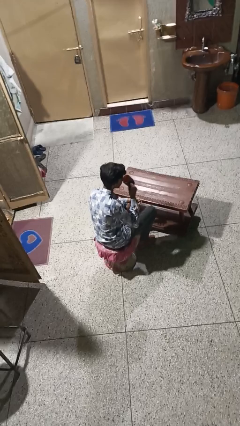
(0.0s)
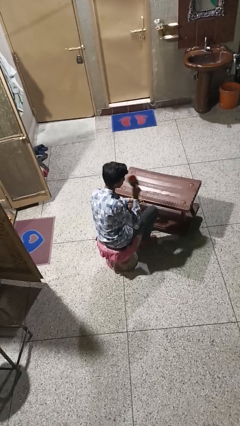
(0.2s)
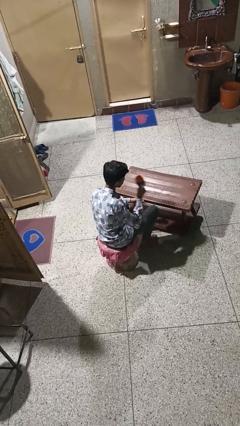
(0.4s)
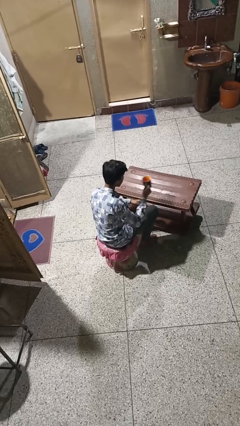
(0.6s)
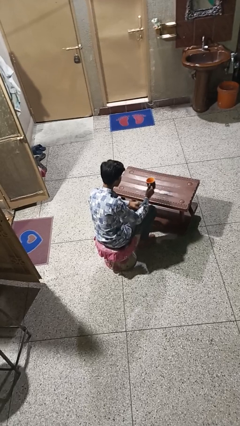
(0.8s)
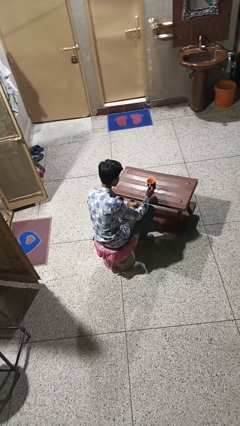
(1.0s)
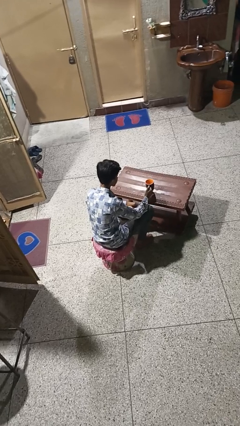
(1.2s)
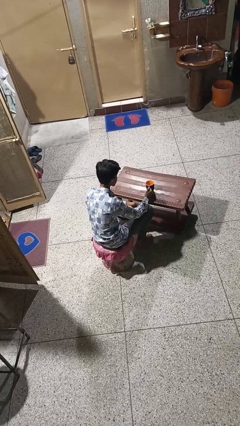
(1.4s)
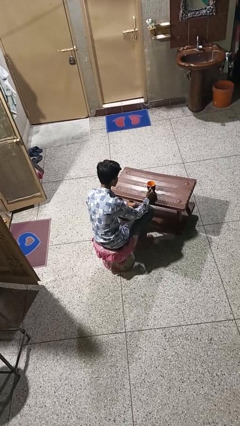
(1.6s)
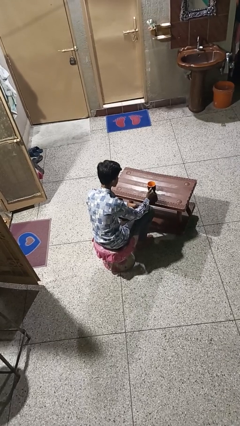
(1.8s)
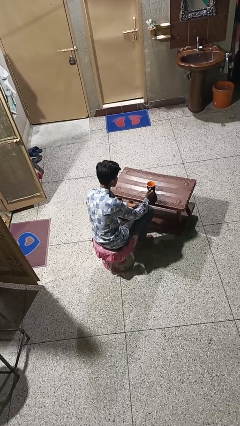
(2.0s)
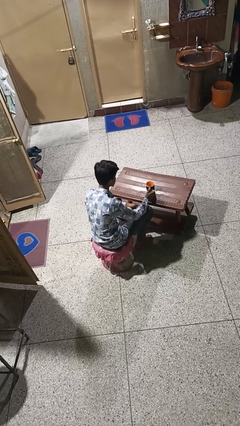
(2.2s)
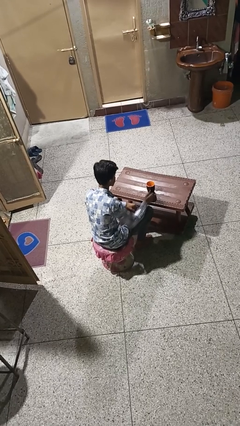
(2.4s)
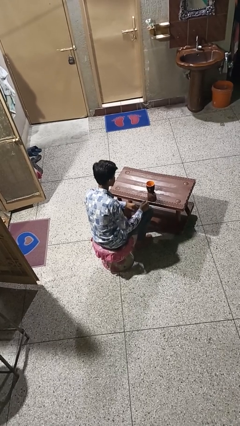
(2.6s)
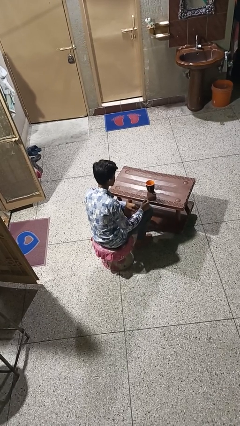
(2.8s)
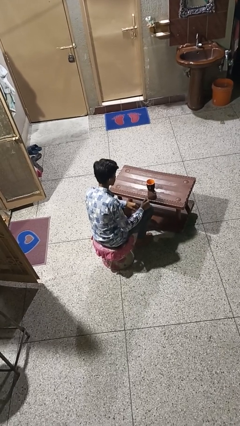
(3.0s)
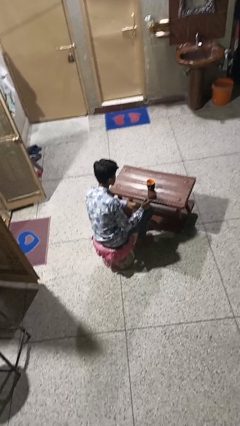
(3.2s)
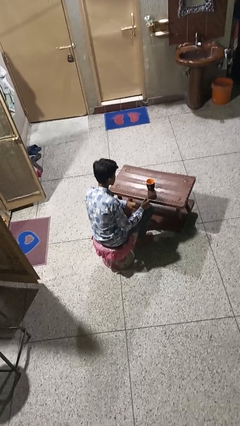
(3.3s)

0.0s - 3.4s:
person puts down object on table

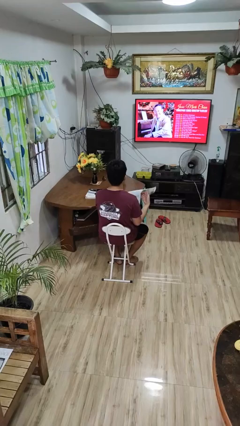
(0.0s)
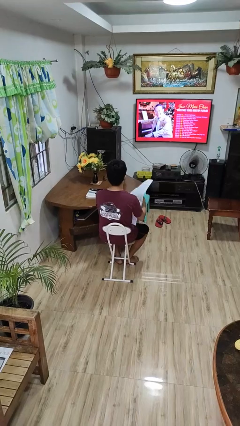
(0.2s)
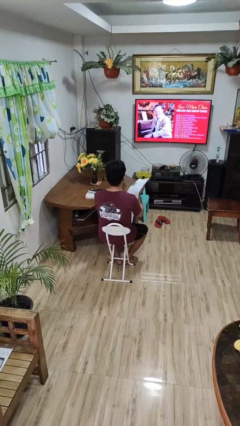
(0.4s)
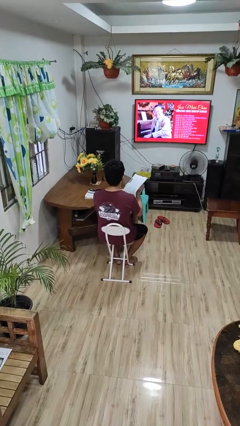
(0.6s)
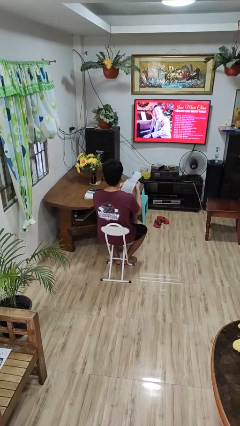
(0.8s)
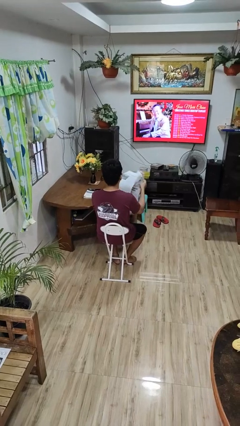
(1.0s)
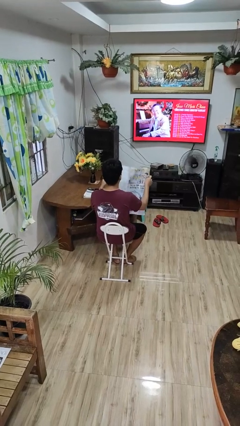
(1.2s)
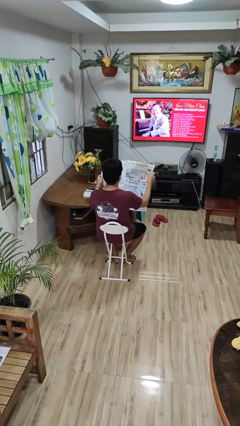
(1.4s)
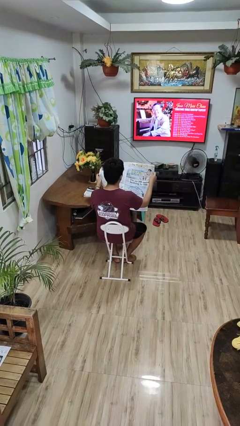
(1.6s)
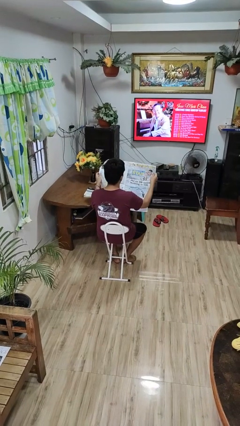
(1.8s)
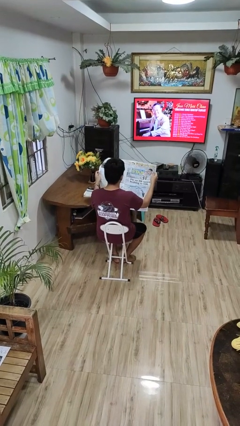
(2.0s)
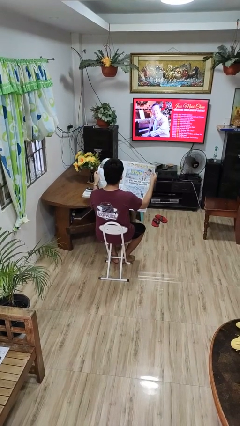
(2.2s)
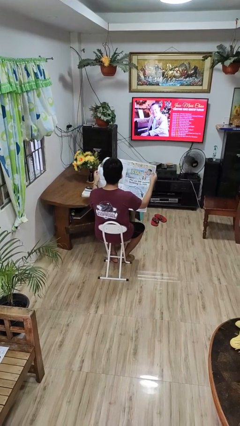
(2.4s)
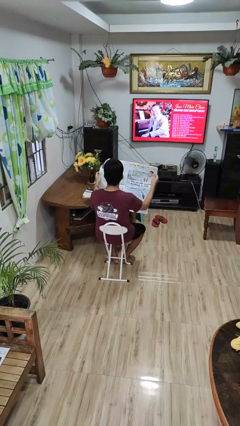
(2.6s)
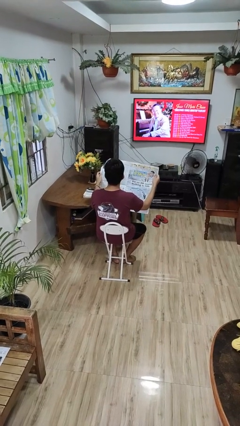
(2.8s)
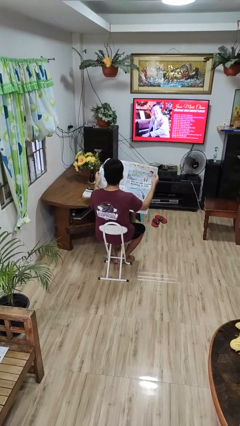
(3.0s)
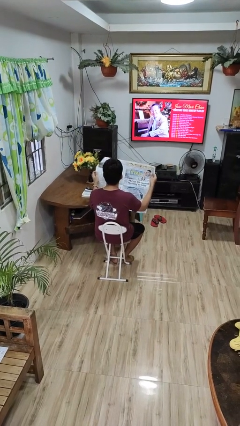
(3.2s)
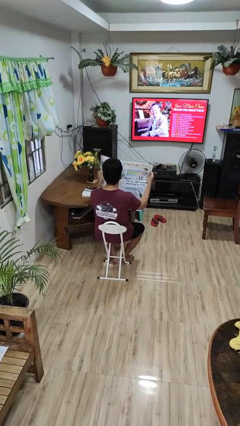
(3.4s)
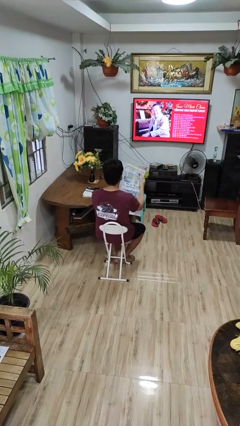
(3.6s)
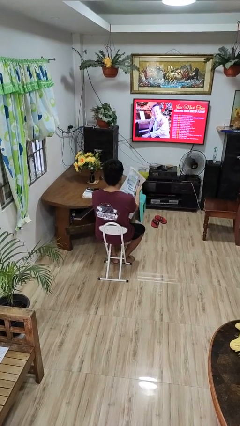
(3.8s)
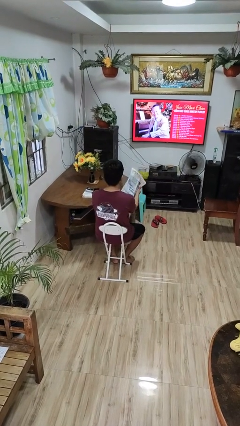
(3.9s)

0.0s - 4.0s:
person reads newspaper

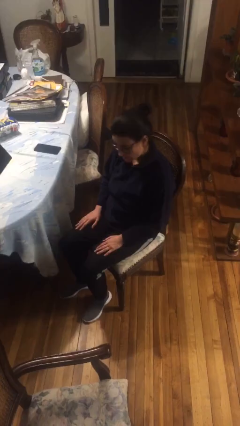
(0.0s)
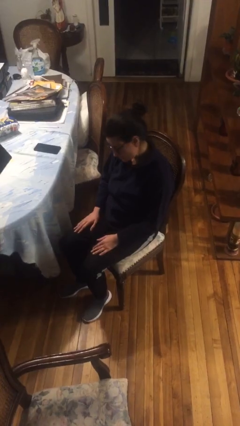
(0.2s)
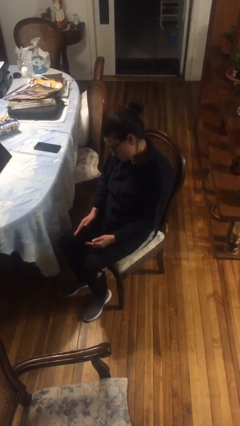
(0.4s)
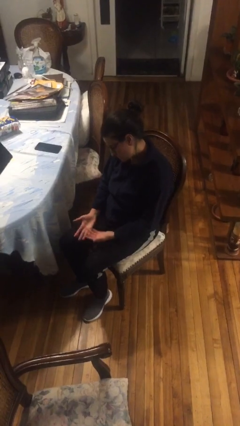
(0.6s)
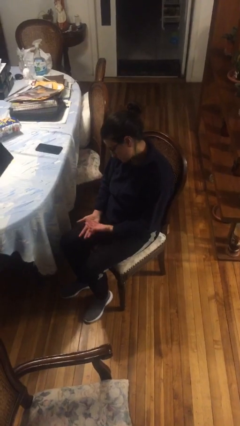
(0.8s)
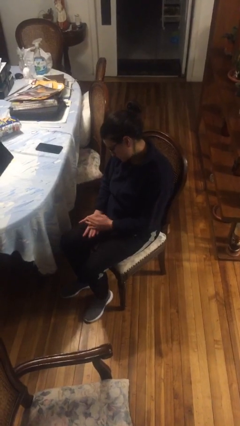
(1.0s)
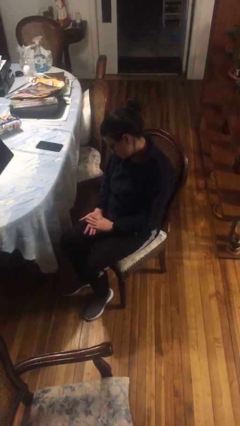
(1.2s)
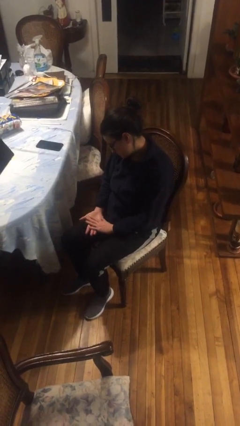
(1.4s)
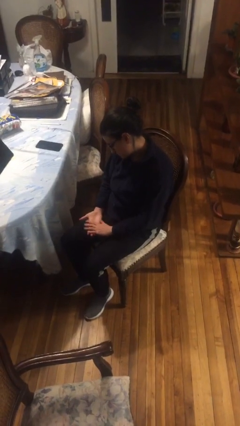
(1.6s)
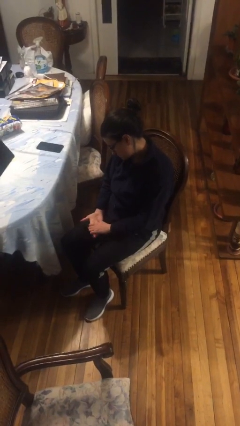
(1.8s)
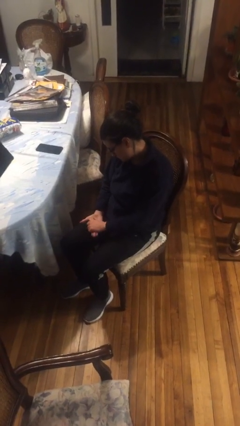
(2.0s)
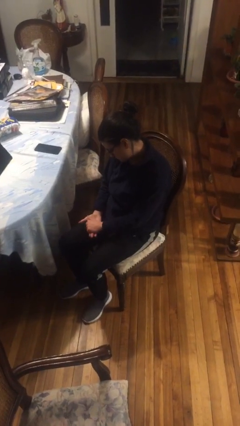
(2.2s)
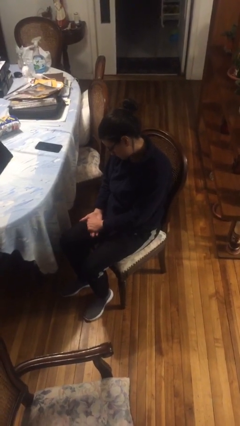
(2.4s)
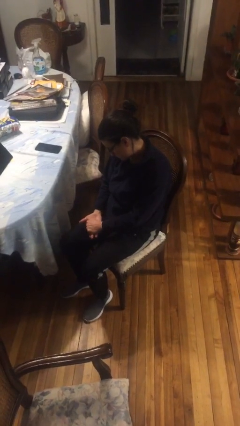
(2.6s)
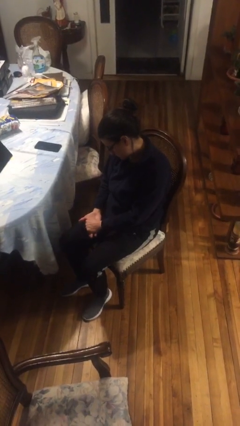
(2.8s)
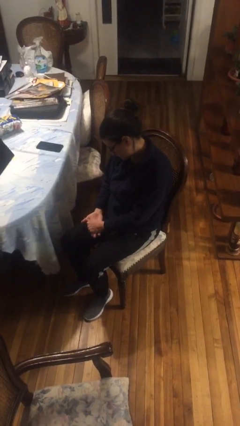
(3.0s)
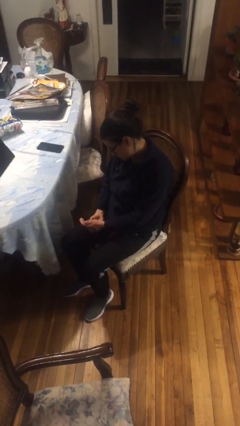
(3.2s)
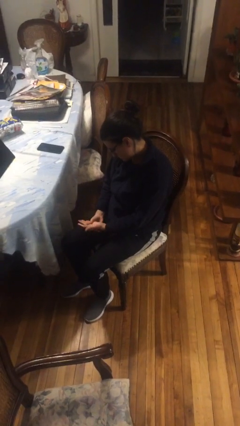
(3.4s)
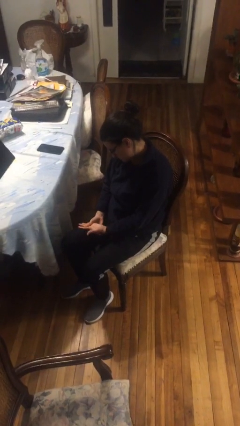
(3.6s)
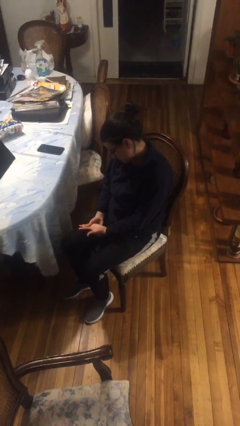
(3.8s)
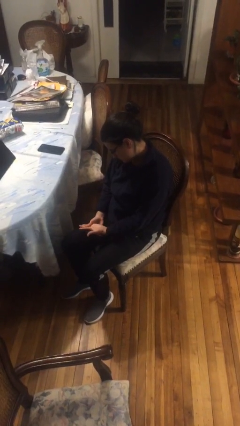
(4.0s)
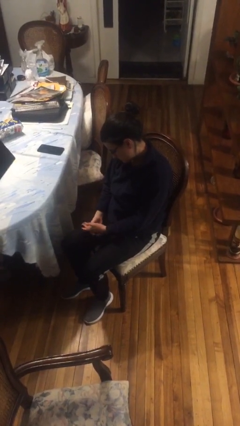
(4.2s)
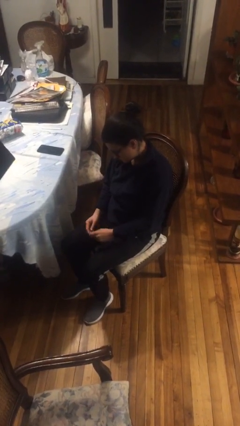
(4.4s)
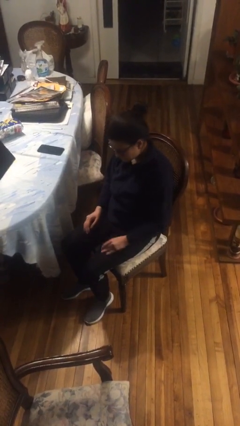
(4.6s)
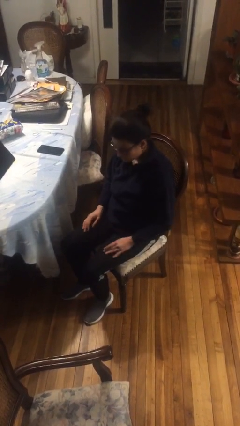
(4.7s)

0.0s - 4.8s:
person looks at hands in lap

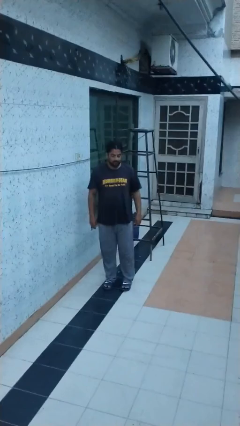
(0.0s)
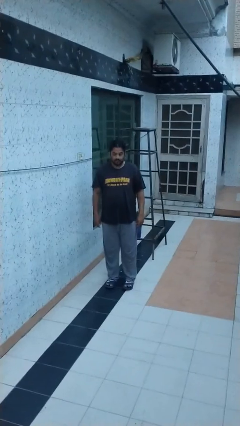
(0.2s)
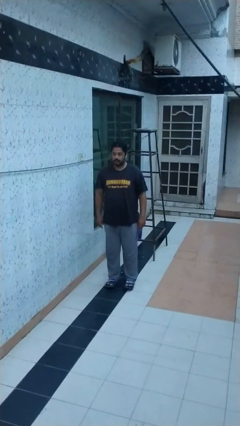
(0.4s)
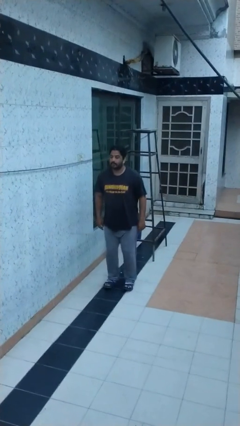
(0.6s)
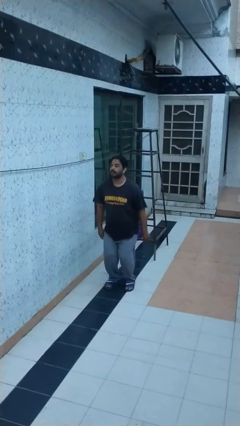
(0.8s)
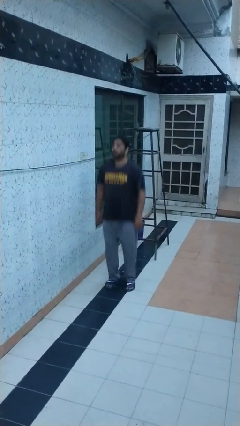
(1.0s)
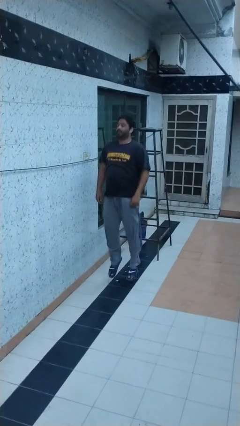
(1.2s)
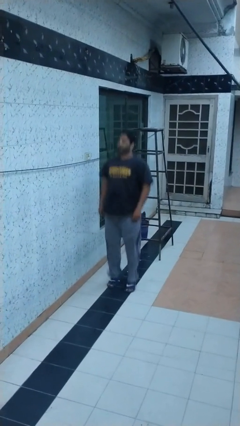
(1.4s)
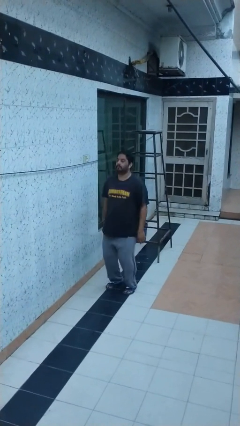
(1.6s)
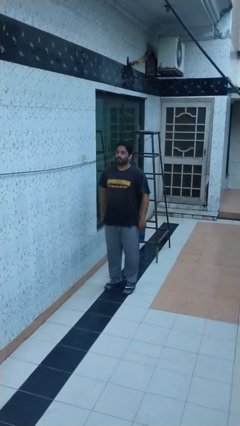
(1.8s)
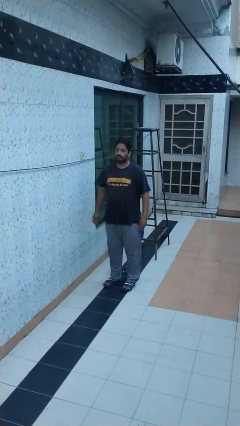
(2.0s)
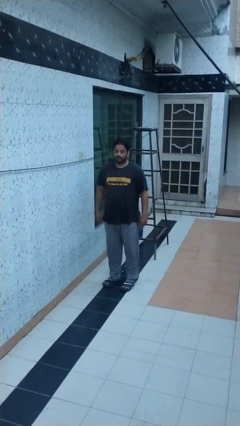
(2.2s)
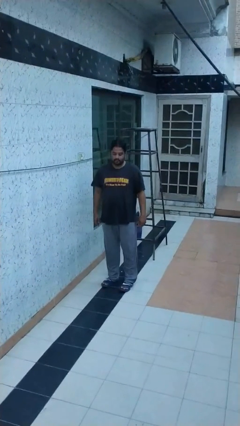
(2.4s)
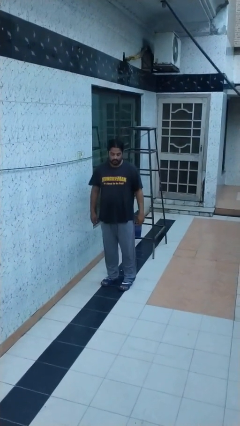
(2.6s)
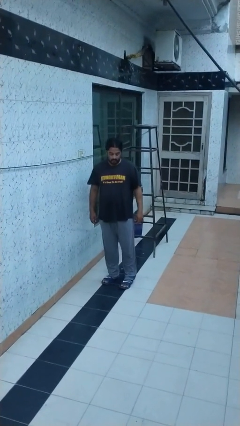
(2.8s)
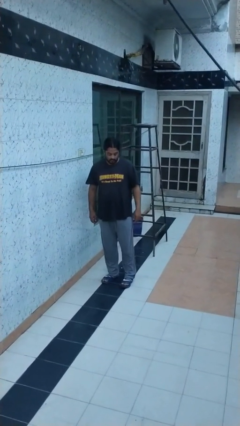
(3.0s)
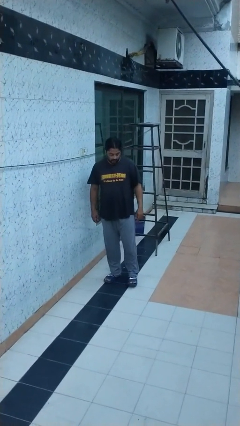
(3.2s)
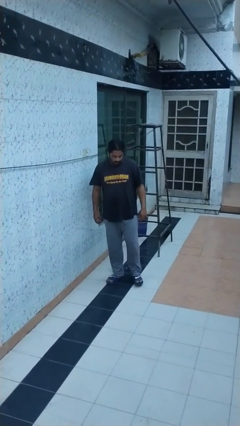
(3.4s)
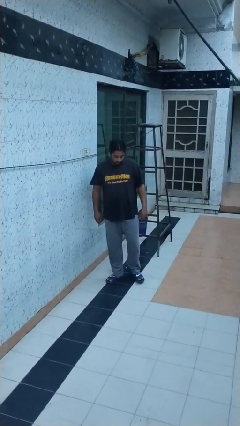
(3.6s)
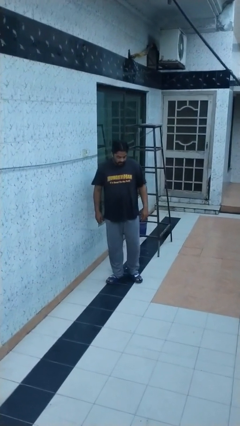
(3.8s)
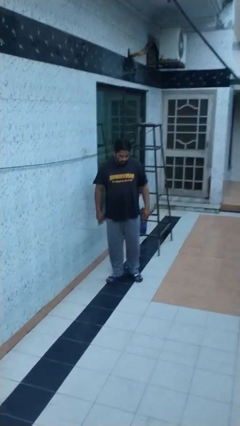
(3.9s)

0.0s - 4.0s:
person jumps

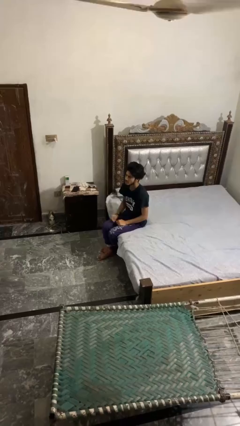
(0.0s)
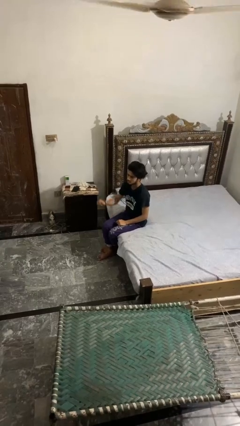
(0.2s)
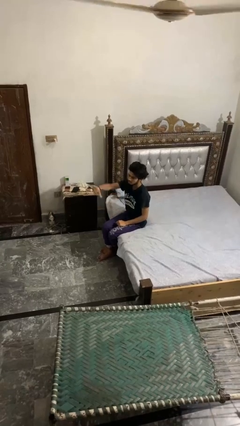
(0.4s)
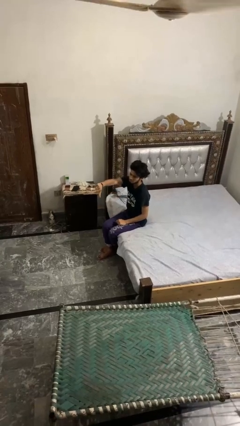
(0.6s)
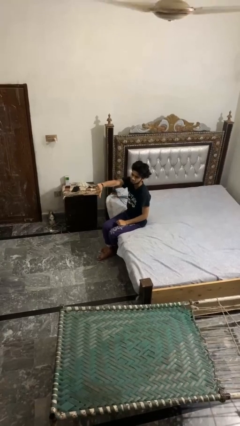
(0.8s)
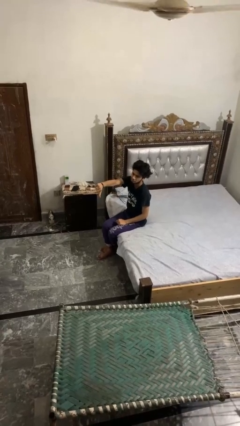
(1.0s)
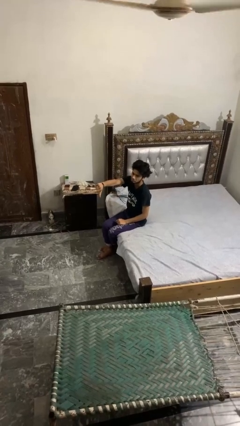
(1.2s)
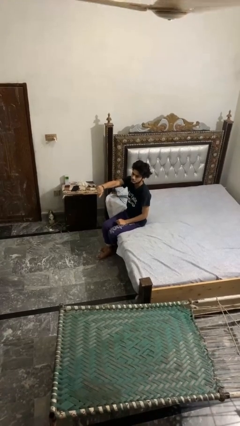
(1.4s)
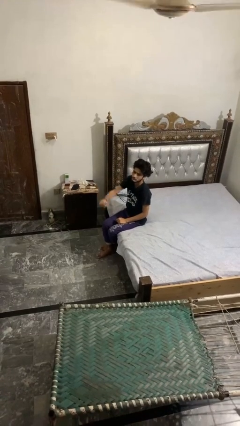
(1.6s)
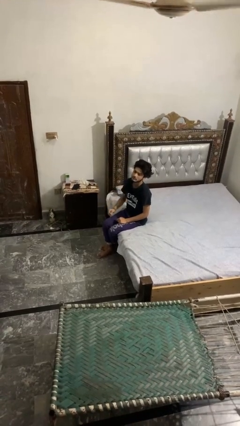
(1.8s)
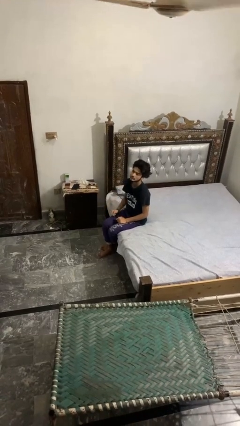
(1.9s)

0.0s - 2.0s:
person gestures thumbs down
